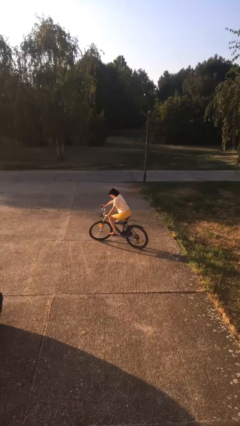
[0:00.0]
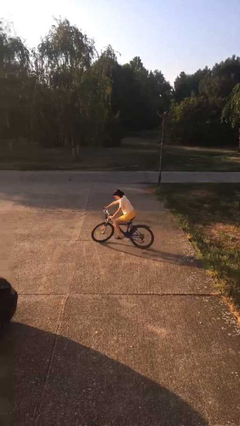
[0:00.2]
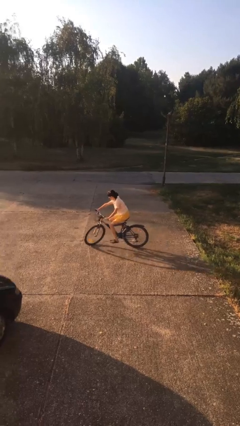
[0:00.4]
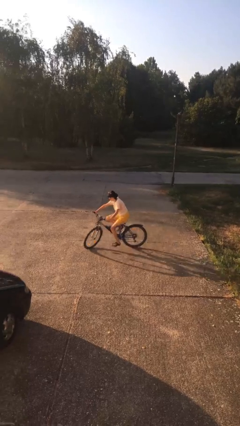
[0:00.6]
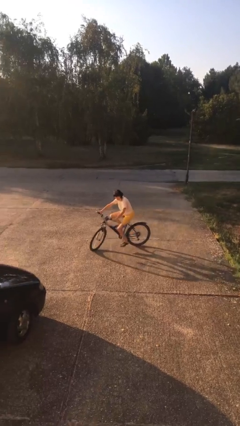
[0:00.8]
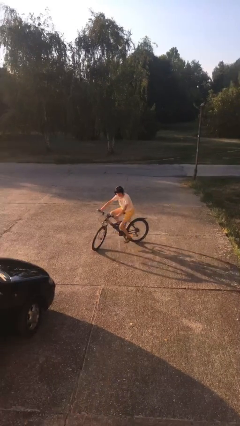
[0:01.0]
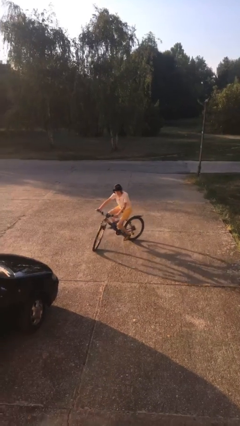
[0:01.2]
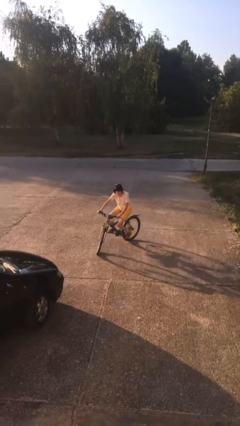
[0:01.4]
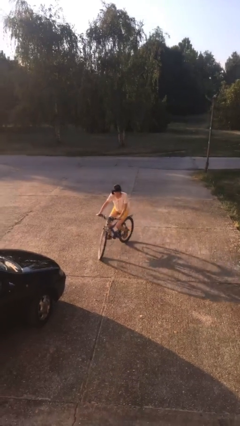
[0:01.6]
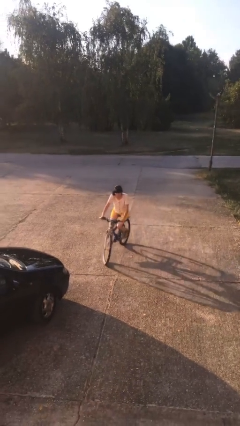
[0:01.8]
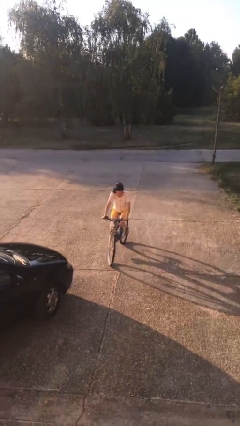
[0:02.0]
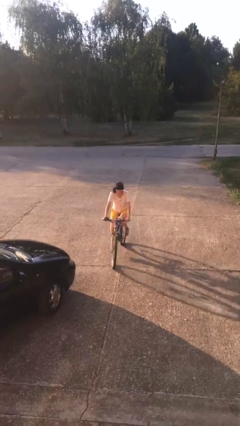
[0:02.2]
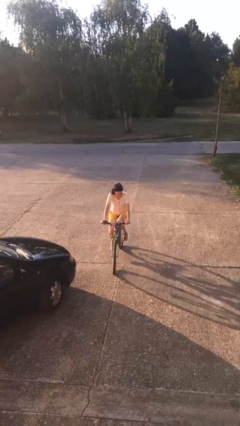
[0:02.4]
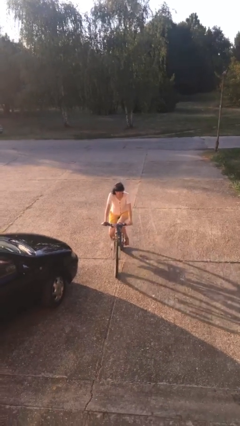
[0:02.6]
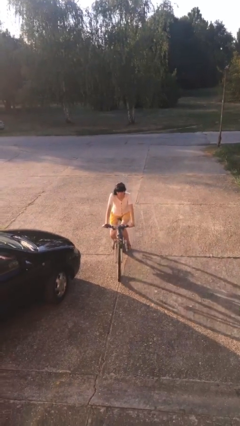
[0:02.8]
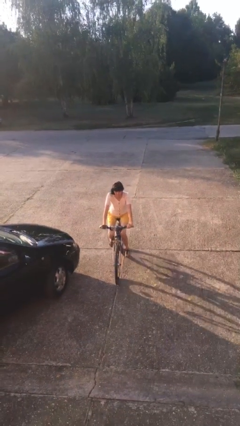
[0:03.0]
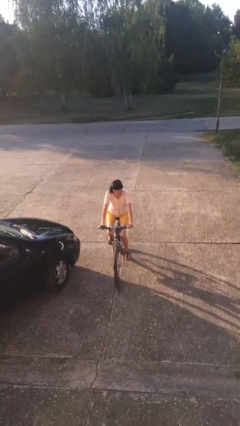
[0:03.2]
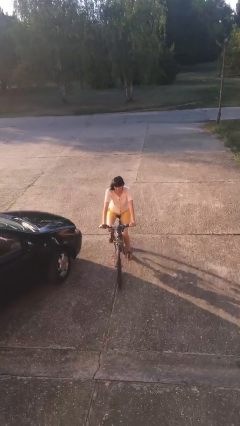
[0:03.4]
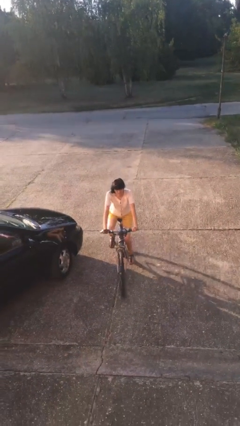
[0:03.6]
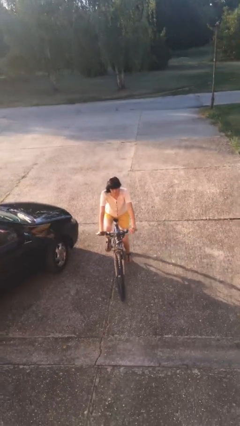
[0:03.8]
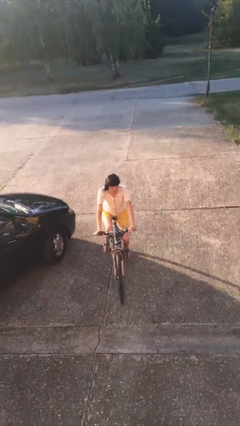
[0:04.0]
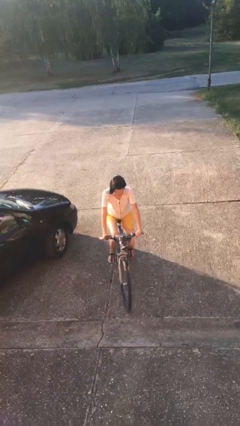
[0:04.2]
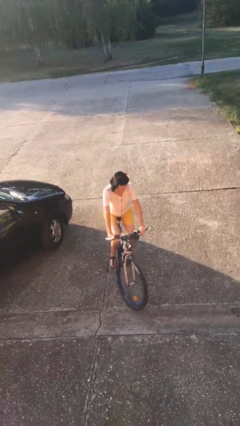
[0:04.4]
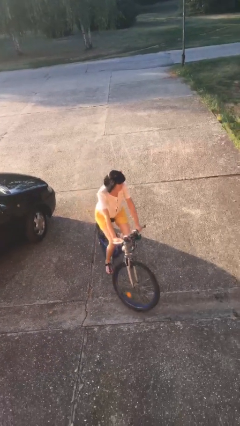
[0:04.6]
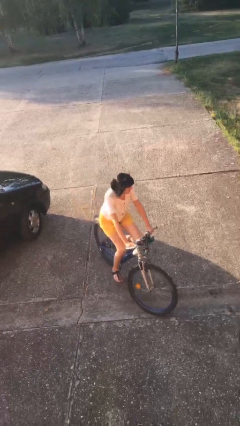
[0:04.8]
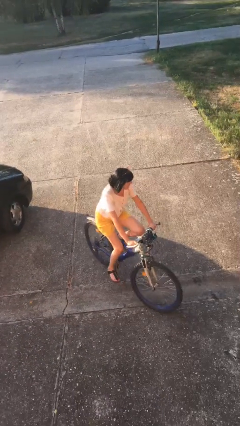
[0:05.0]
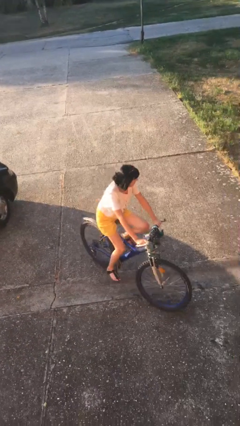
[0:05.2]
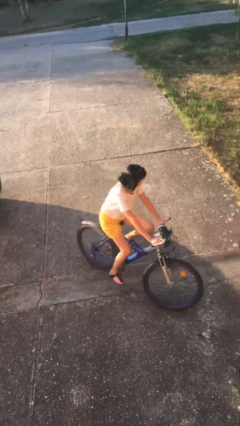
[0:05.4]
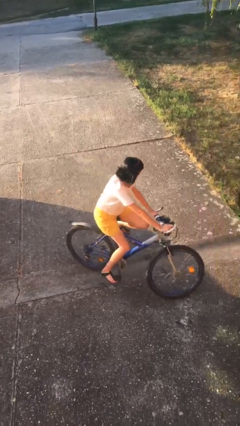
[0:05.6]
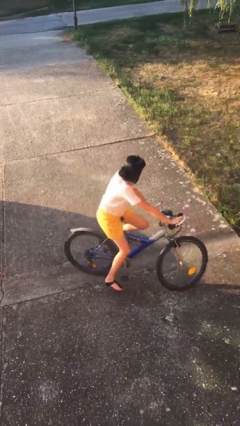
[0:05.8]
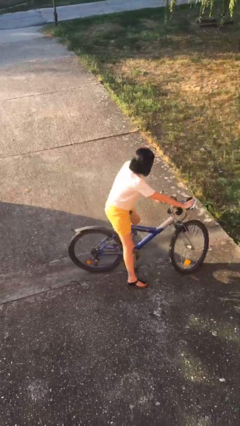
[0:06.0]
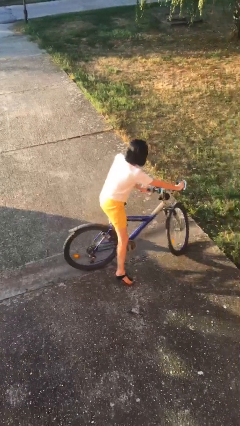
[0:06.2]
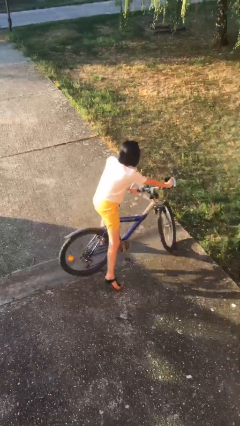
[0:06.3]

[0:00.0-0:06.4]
person rides bicycle

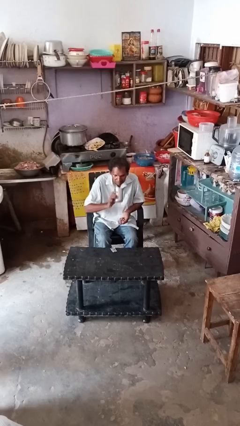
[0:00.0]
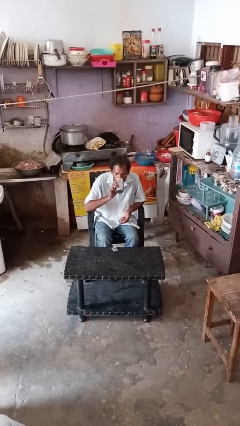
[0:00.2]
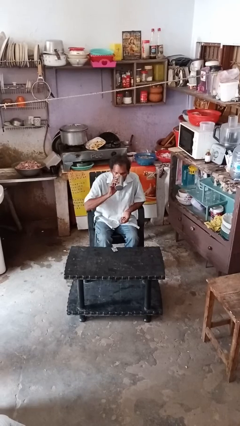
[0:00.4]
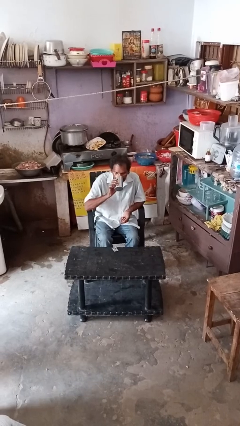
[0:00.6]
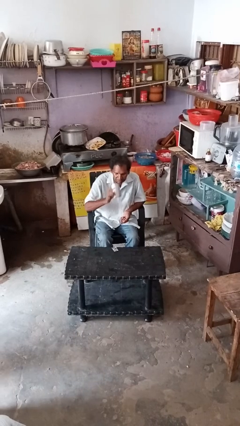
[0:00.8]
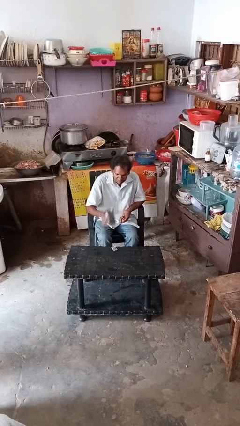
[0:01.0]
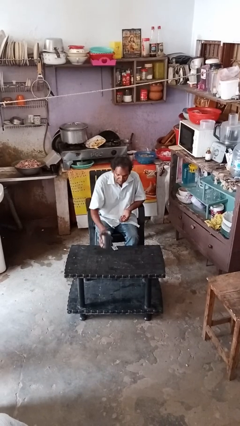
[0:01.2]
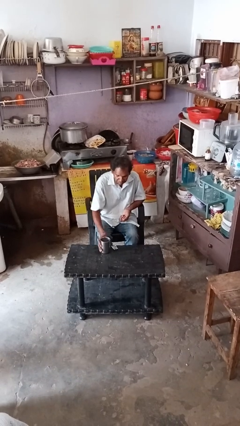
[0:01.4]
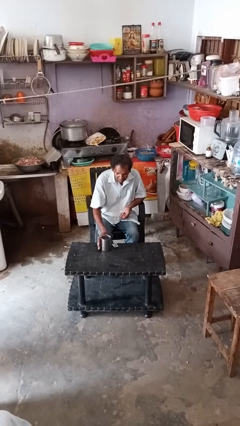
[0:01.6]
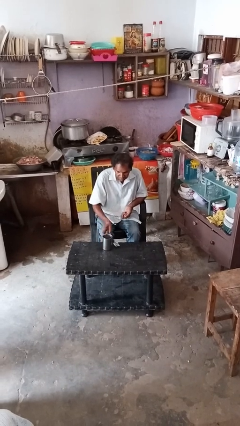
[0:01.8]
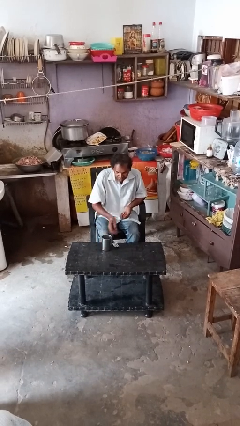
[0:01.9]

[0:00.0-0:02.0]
person drinks from cup

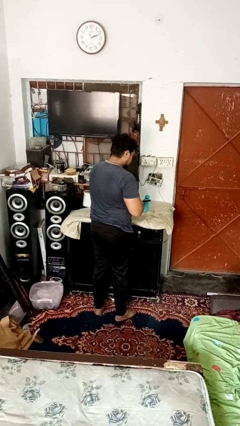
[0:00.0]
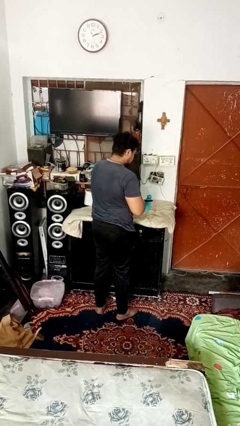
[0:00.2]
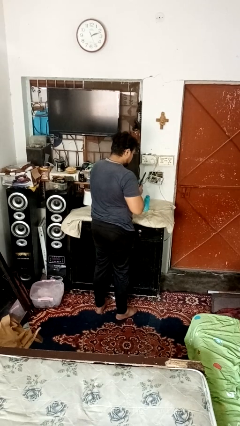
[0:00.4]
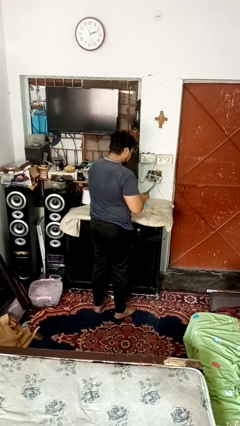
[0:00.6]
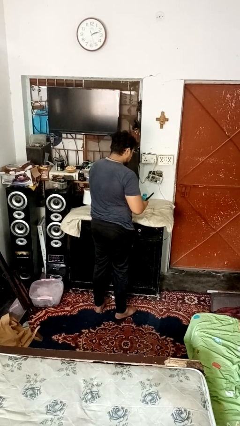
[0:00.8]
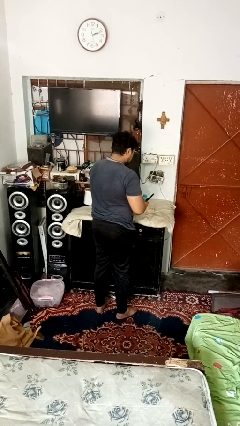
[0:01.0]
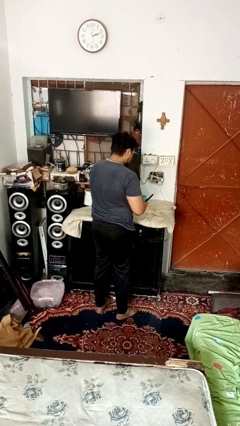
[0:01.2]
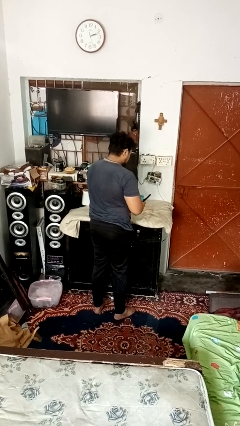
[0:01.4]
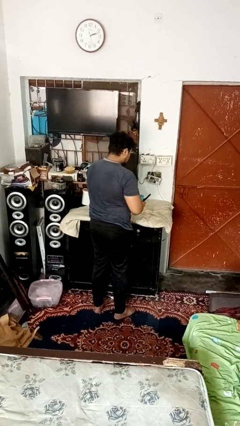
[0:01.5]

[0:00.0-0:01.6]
person opens can with can opener

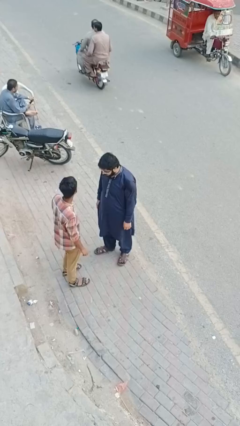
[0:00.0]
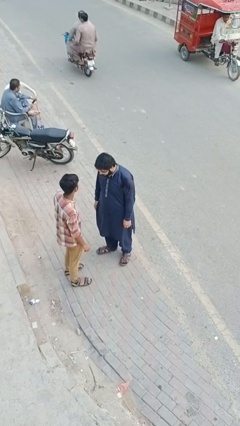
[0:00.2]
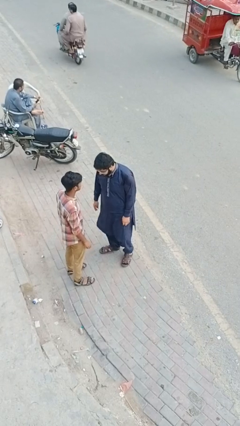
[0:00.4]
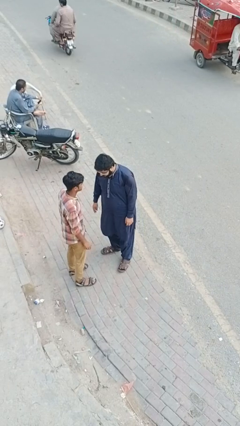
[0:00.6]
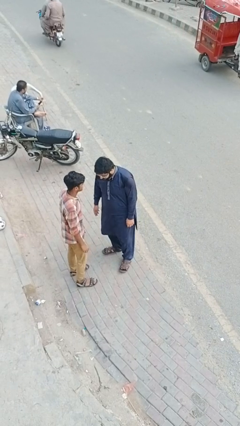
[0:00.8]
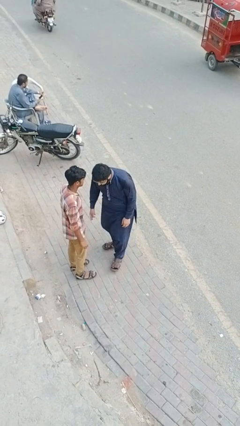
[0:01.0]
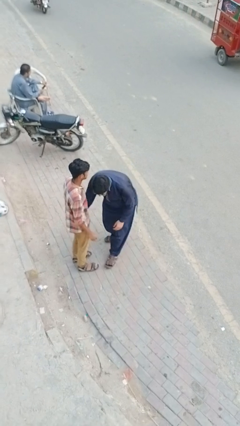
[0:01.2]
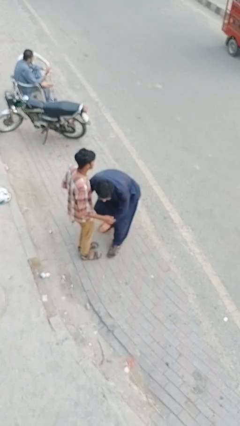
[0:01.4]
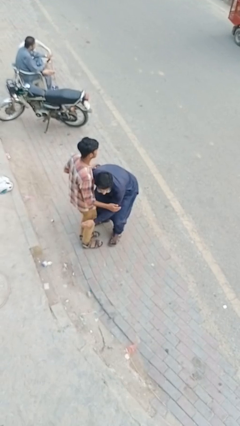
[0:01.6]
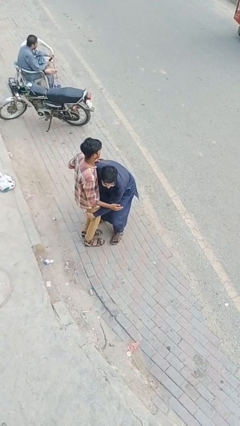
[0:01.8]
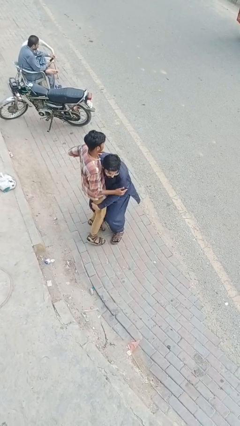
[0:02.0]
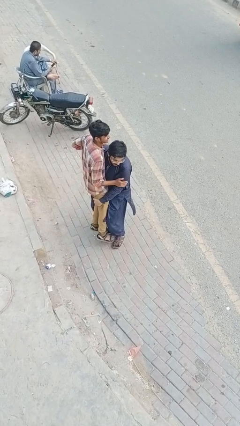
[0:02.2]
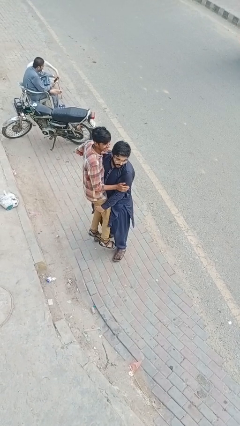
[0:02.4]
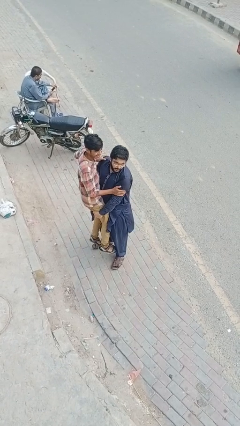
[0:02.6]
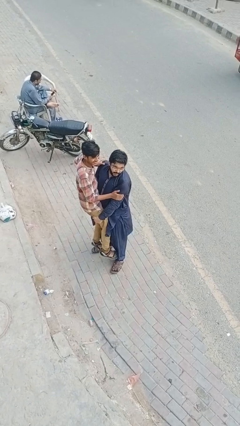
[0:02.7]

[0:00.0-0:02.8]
person picks up person

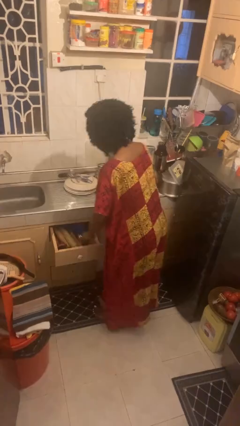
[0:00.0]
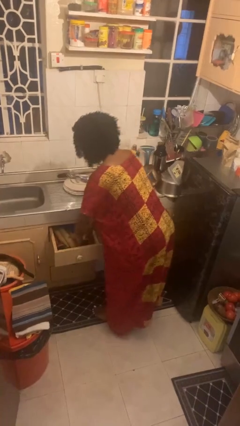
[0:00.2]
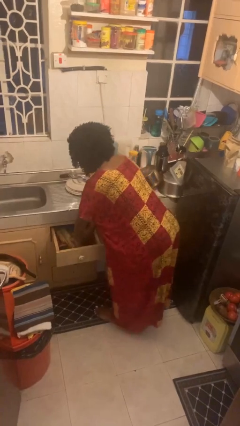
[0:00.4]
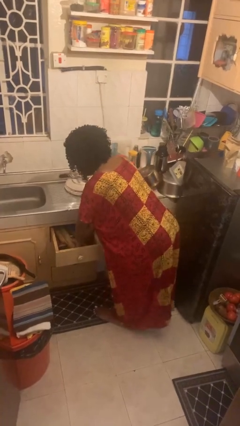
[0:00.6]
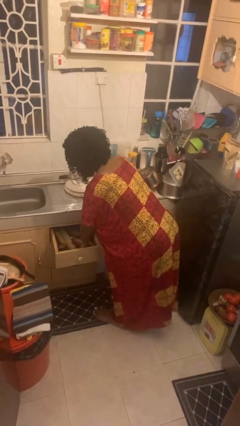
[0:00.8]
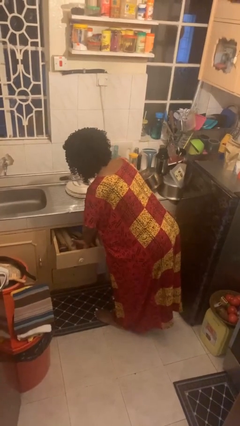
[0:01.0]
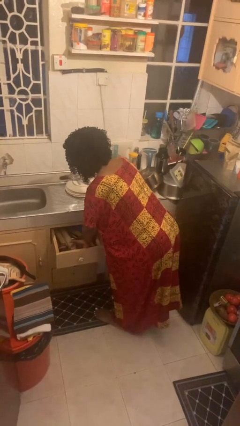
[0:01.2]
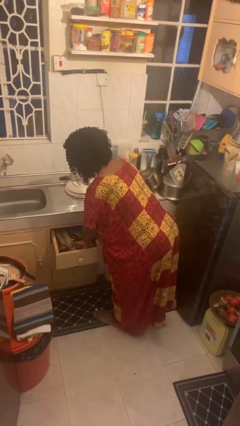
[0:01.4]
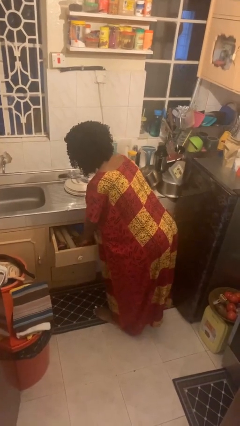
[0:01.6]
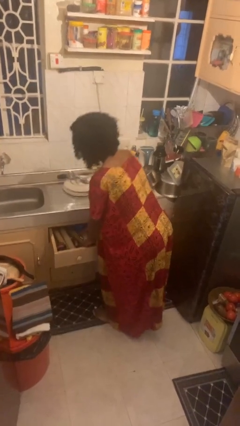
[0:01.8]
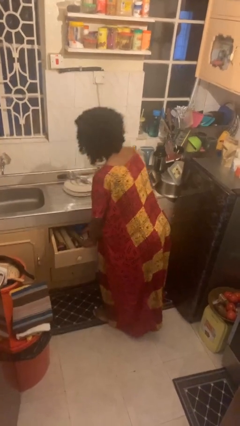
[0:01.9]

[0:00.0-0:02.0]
person searches in kitchen drawer

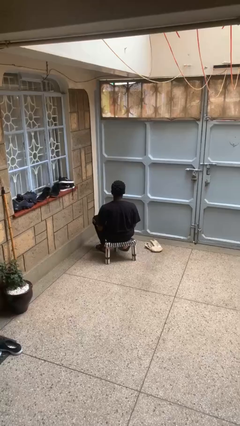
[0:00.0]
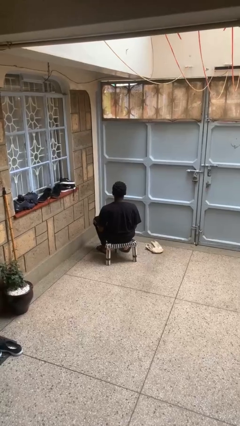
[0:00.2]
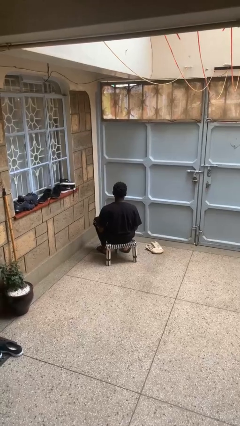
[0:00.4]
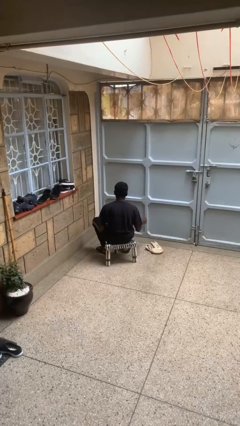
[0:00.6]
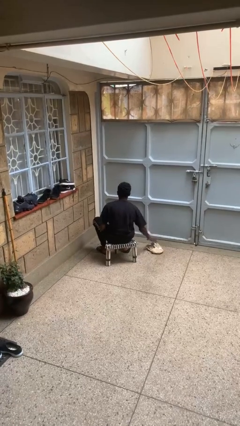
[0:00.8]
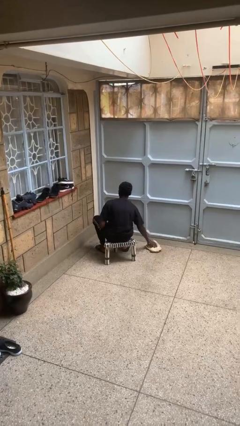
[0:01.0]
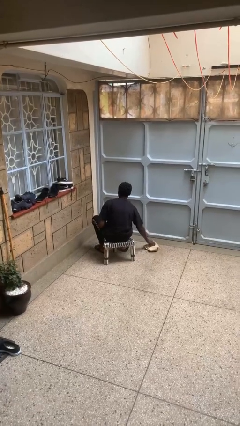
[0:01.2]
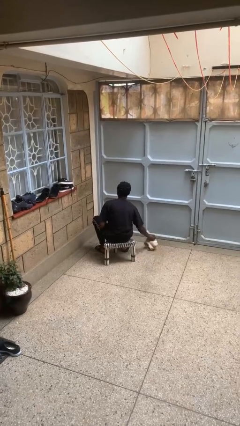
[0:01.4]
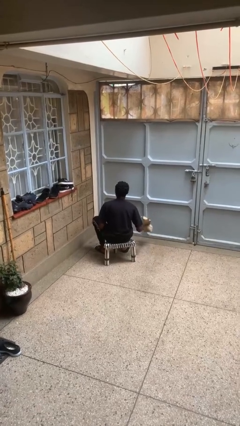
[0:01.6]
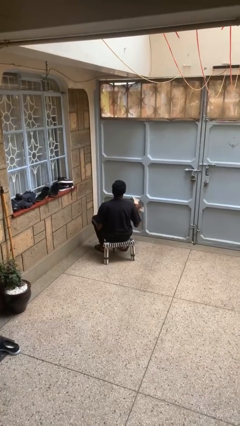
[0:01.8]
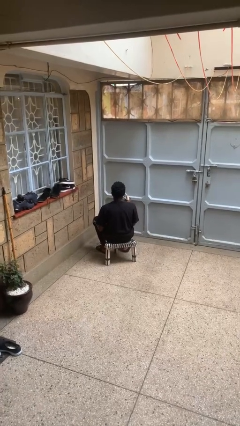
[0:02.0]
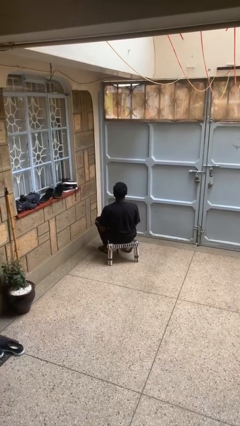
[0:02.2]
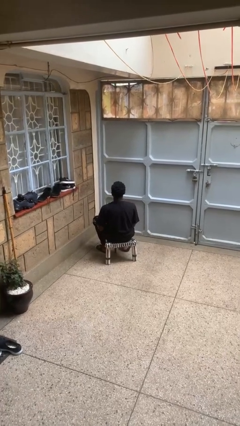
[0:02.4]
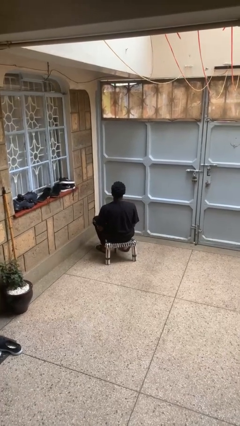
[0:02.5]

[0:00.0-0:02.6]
person picks up object from floor
